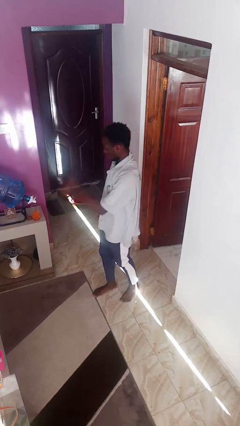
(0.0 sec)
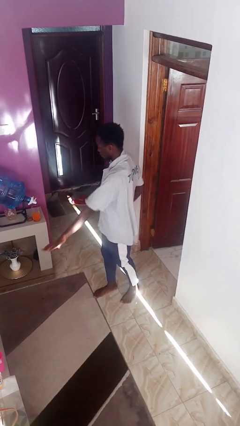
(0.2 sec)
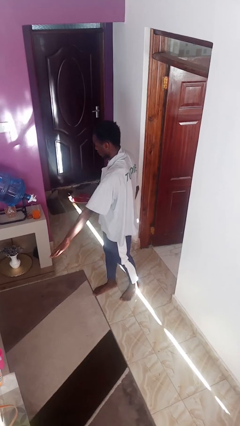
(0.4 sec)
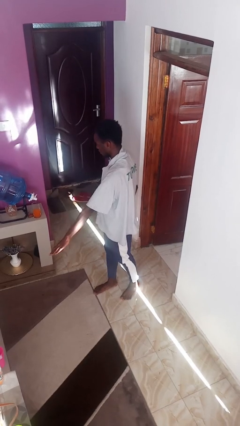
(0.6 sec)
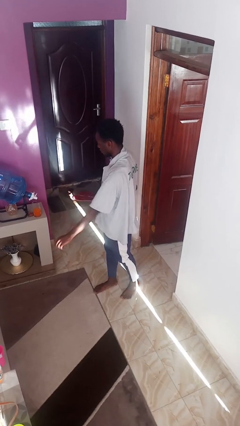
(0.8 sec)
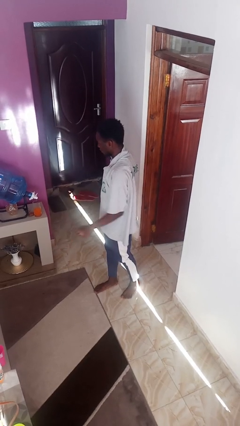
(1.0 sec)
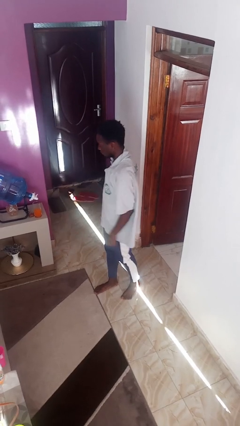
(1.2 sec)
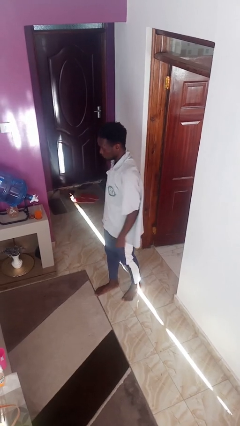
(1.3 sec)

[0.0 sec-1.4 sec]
person karate chop

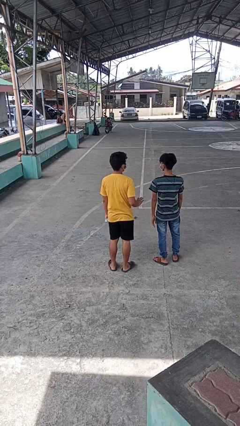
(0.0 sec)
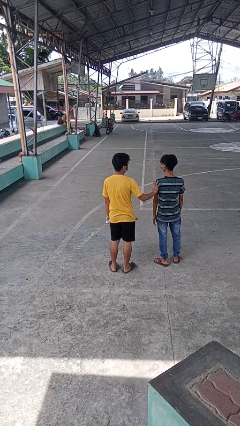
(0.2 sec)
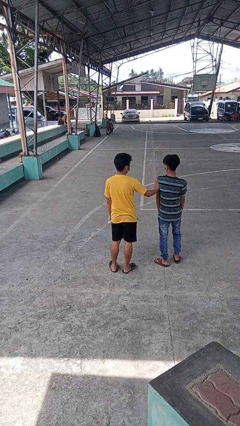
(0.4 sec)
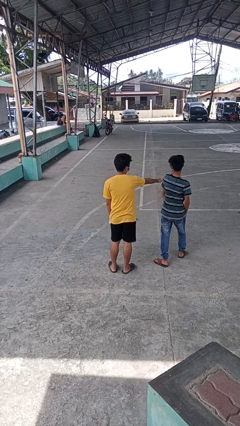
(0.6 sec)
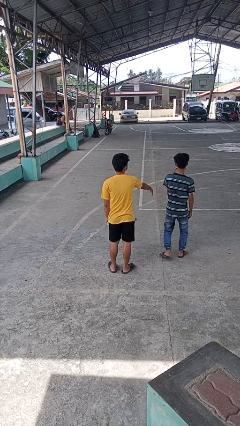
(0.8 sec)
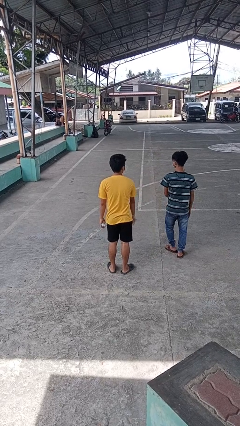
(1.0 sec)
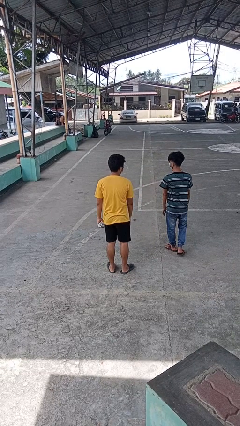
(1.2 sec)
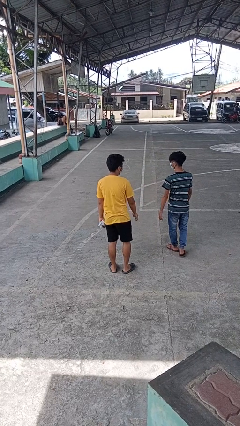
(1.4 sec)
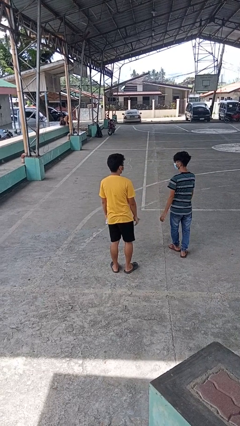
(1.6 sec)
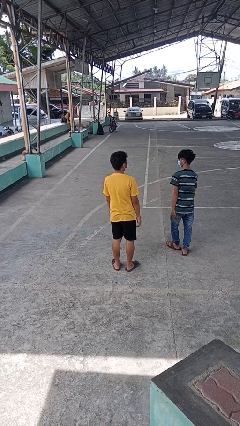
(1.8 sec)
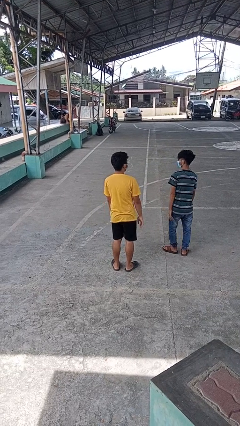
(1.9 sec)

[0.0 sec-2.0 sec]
person shoves person

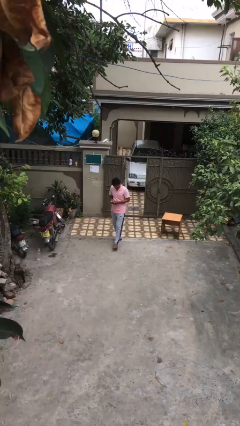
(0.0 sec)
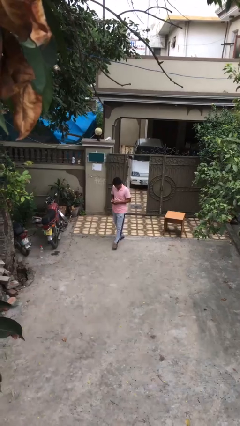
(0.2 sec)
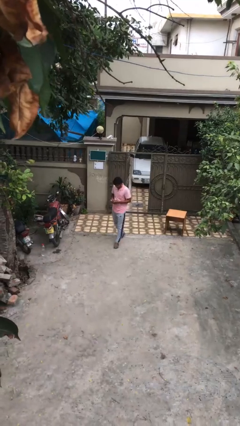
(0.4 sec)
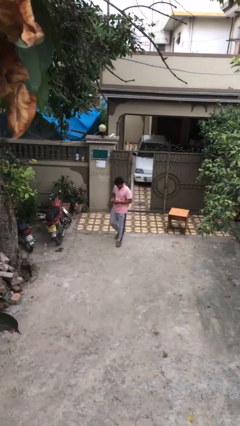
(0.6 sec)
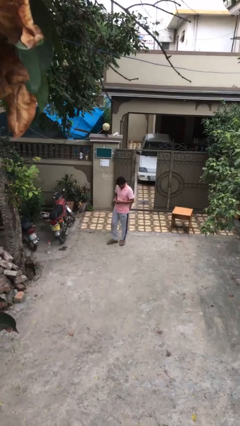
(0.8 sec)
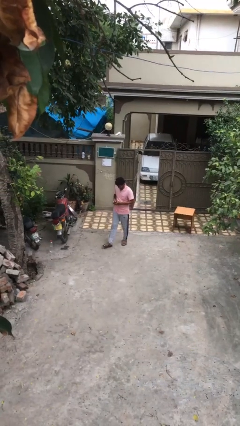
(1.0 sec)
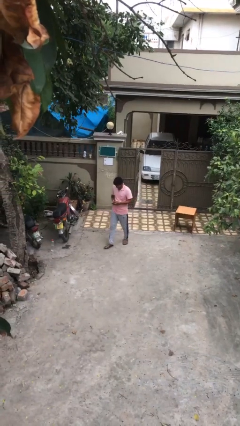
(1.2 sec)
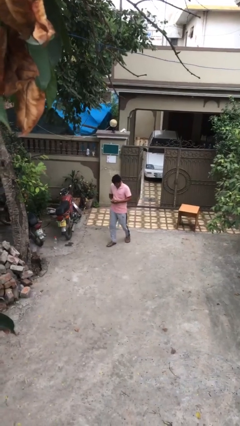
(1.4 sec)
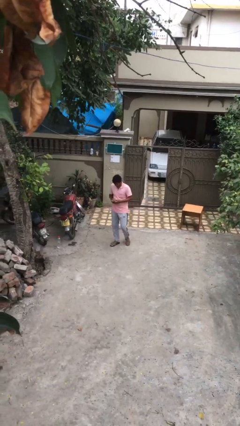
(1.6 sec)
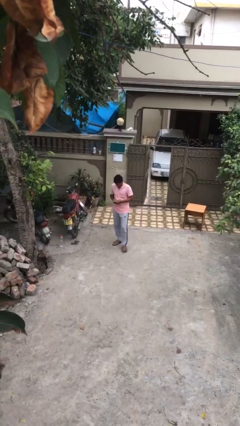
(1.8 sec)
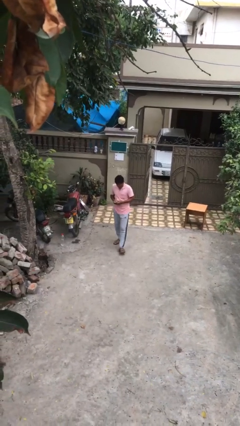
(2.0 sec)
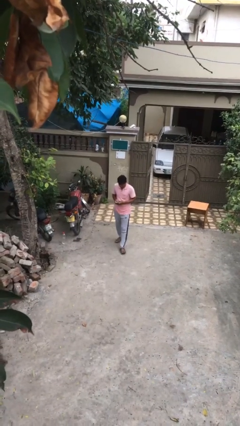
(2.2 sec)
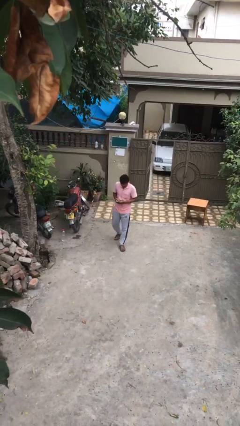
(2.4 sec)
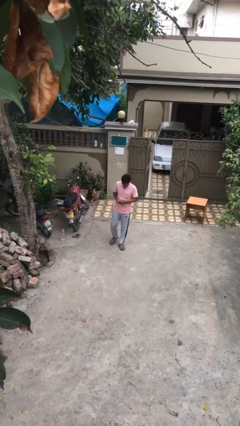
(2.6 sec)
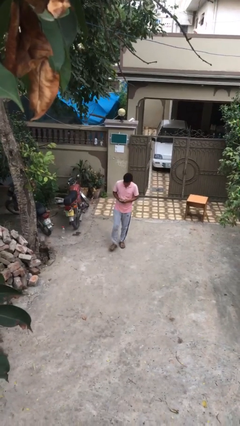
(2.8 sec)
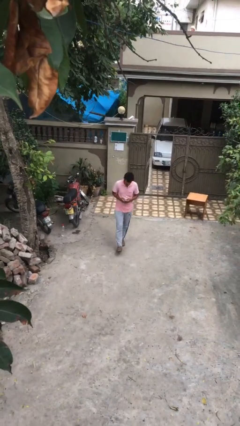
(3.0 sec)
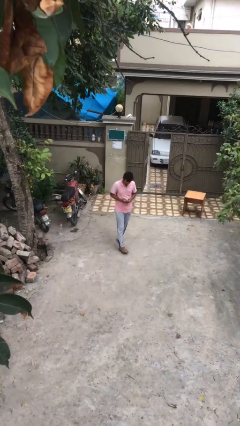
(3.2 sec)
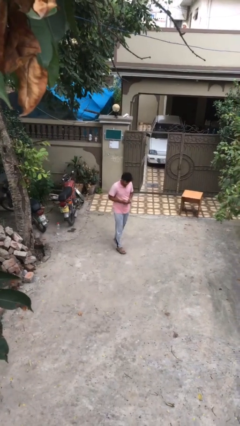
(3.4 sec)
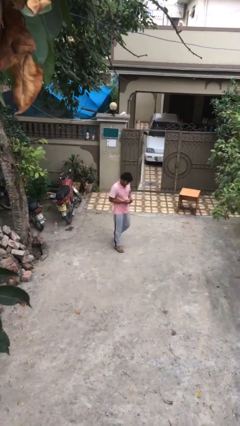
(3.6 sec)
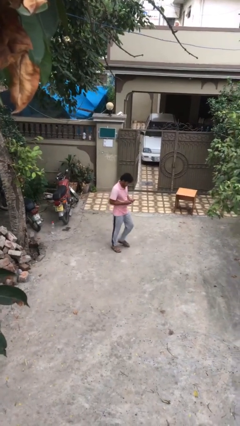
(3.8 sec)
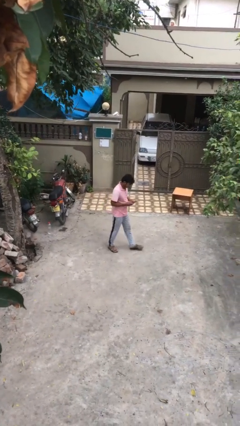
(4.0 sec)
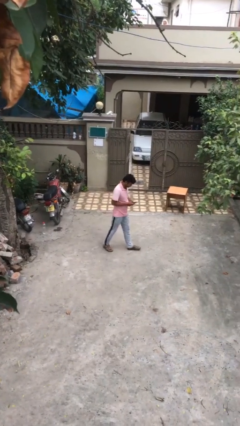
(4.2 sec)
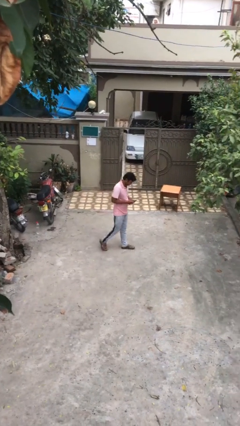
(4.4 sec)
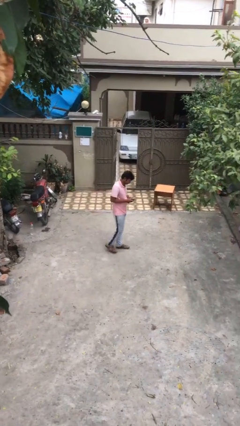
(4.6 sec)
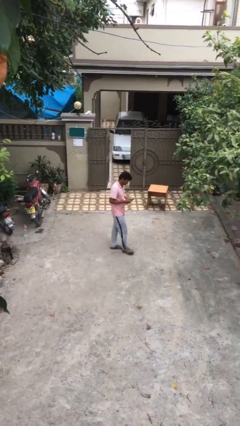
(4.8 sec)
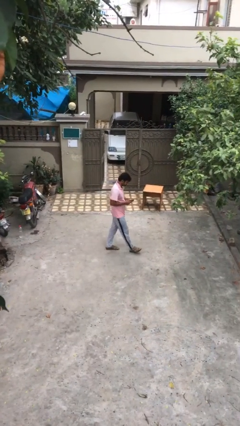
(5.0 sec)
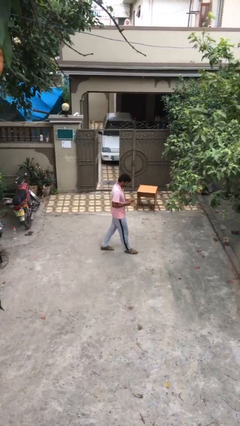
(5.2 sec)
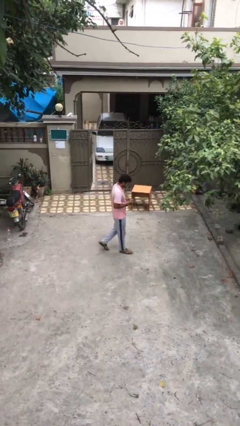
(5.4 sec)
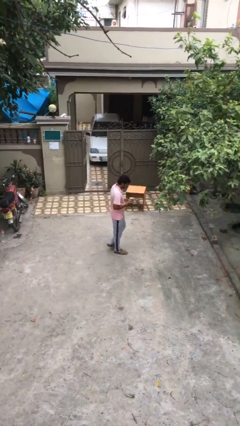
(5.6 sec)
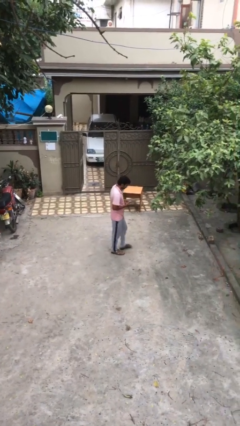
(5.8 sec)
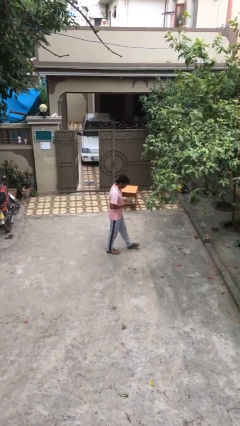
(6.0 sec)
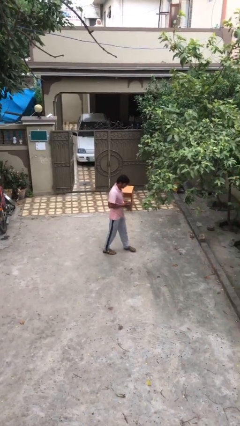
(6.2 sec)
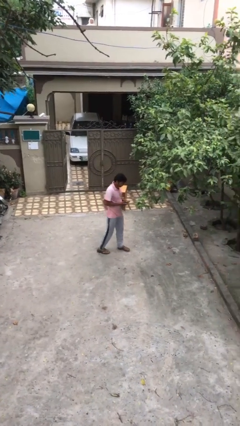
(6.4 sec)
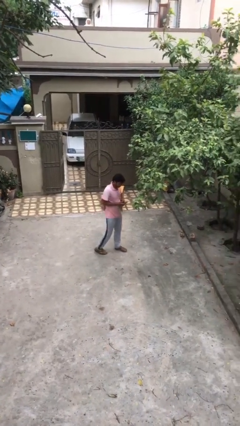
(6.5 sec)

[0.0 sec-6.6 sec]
person texts on phone

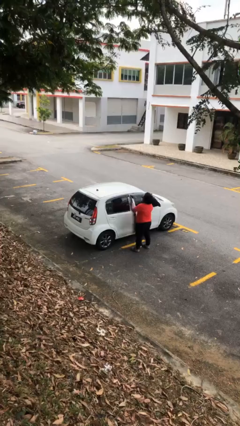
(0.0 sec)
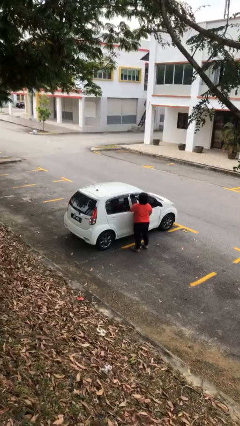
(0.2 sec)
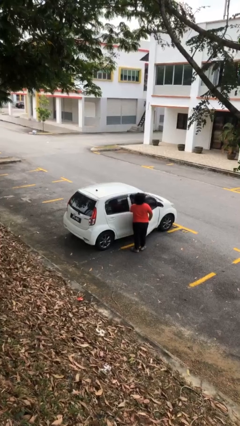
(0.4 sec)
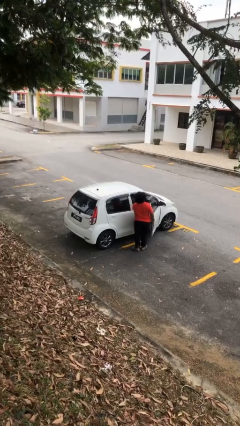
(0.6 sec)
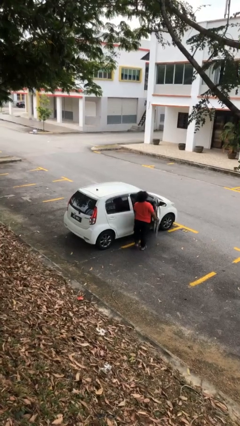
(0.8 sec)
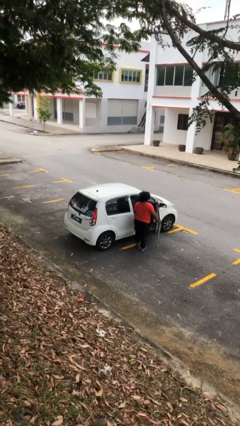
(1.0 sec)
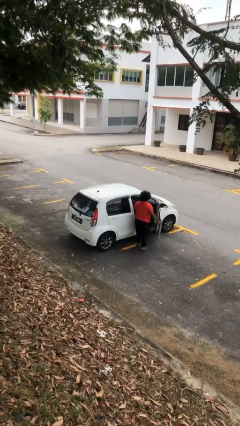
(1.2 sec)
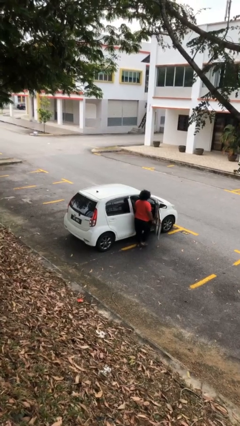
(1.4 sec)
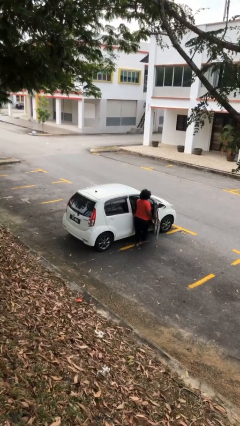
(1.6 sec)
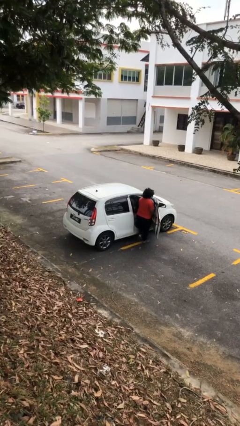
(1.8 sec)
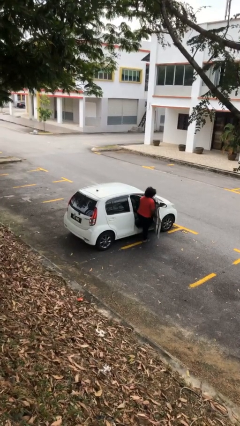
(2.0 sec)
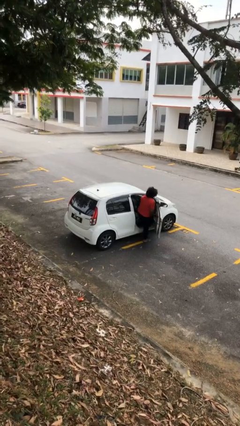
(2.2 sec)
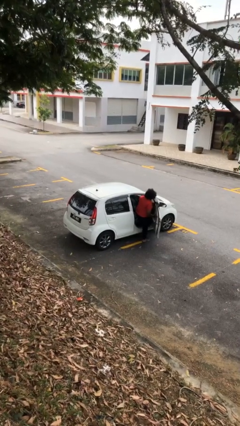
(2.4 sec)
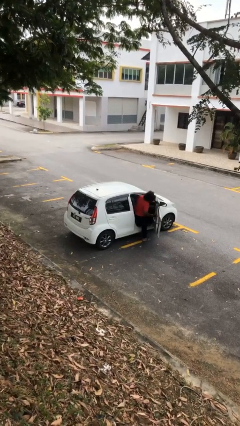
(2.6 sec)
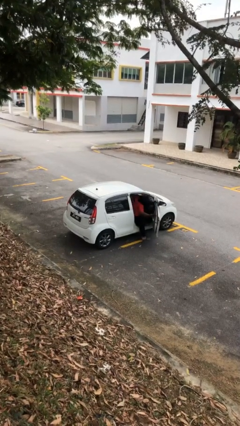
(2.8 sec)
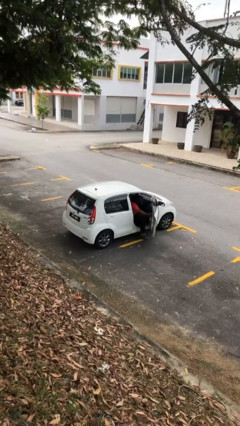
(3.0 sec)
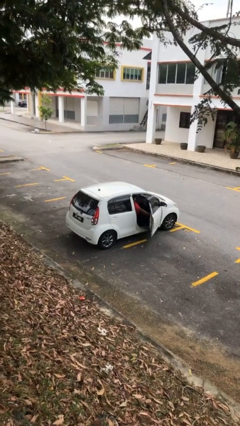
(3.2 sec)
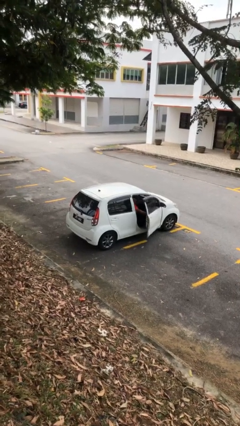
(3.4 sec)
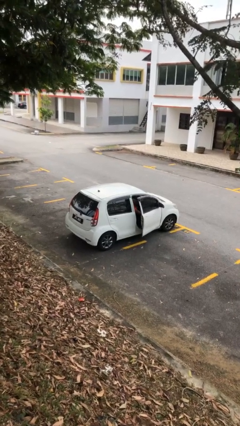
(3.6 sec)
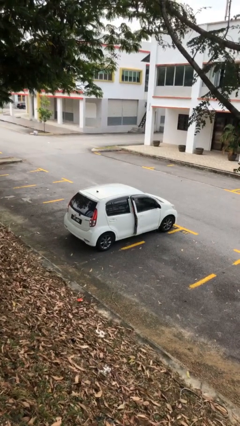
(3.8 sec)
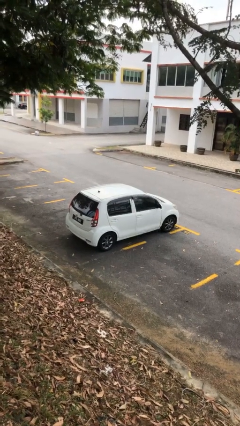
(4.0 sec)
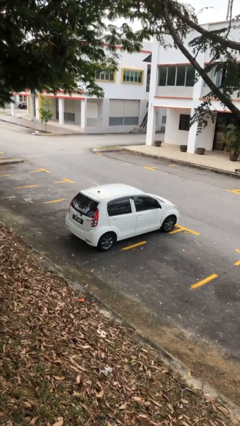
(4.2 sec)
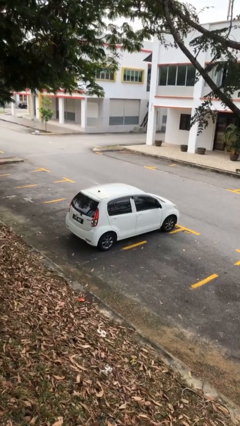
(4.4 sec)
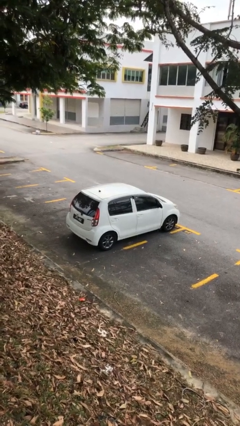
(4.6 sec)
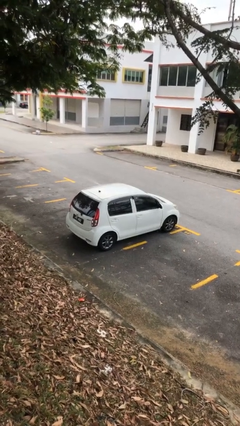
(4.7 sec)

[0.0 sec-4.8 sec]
car picks up person

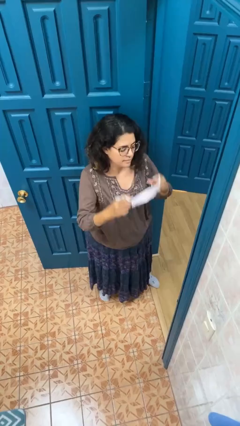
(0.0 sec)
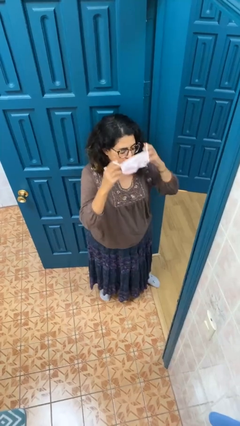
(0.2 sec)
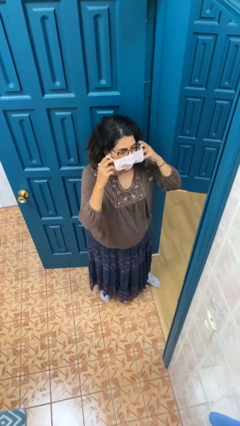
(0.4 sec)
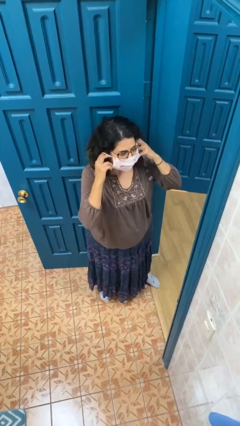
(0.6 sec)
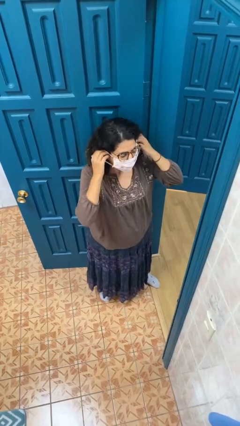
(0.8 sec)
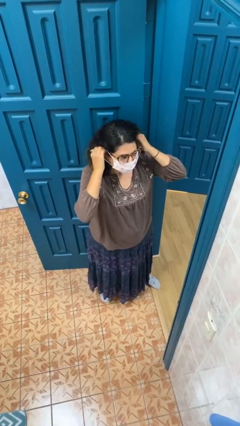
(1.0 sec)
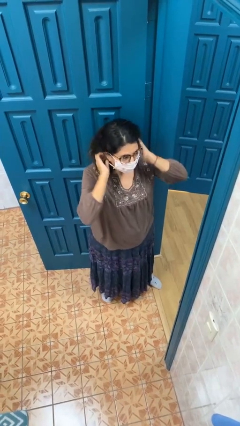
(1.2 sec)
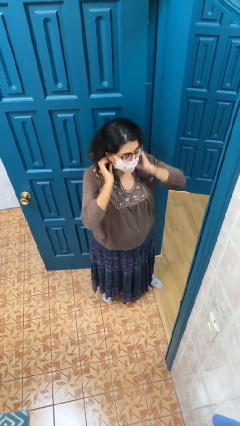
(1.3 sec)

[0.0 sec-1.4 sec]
person puts on facemask

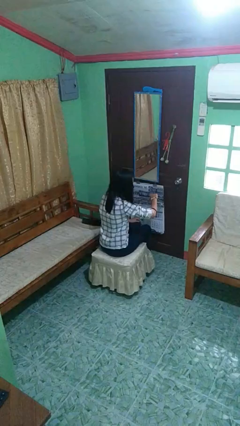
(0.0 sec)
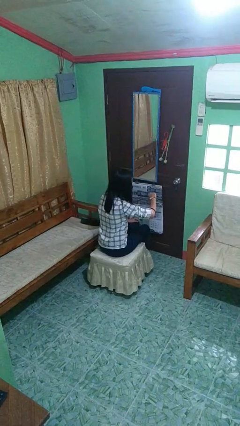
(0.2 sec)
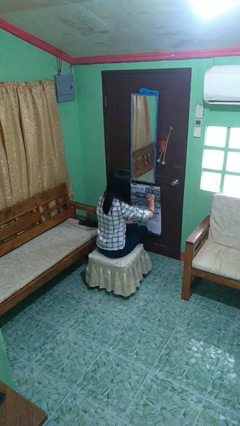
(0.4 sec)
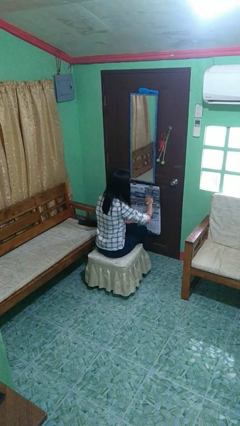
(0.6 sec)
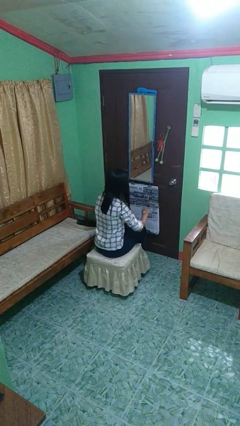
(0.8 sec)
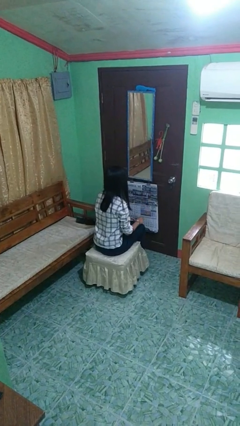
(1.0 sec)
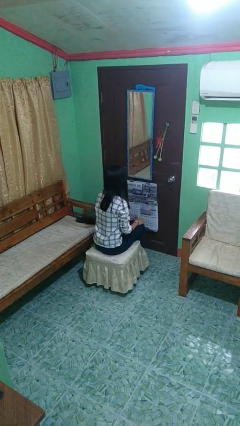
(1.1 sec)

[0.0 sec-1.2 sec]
person looks at wristwatch
